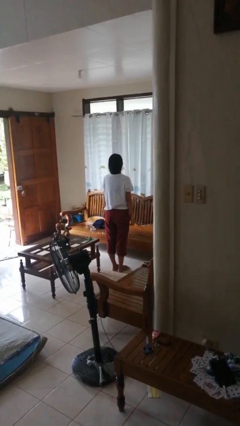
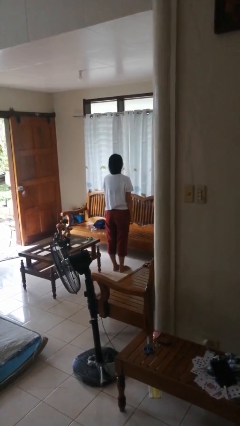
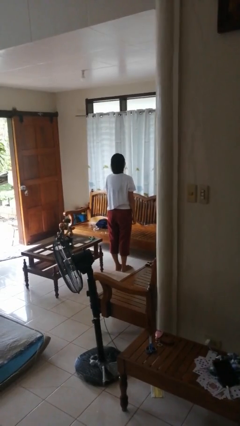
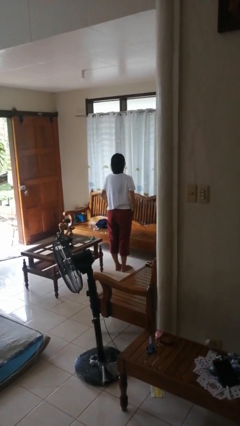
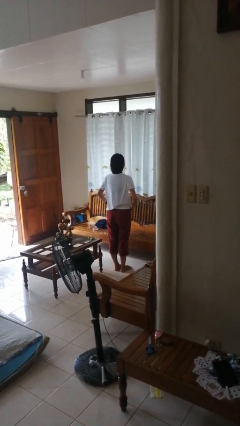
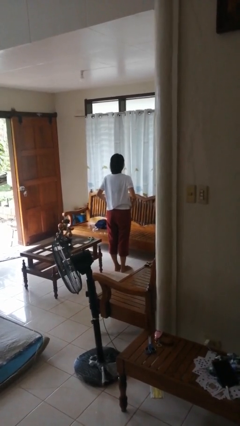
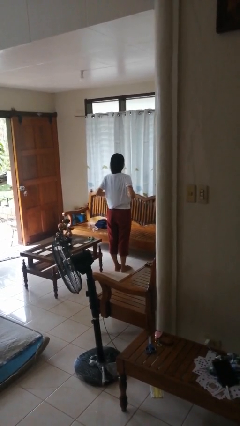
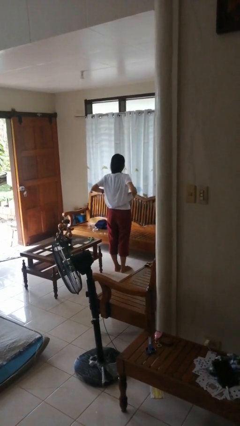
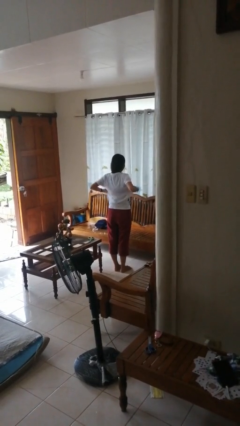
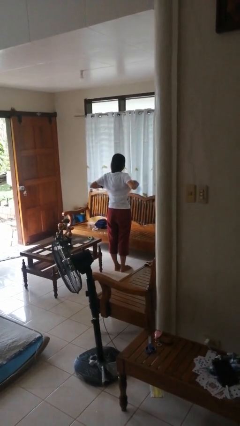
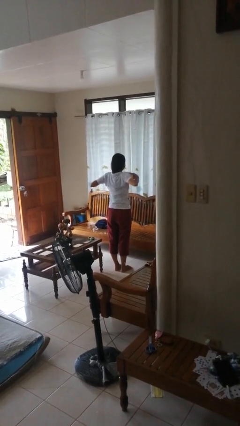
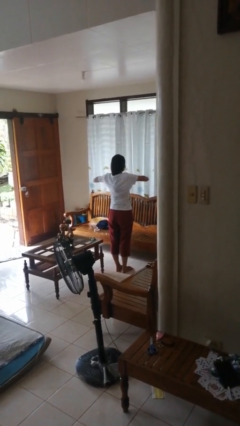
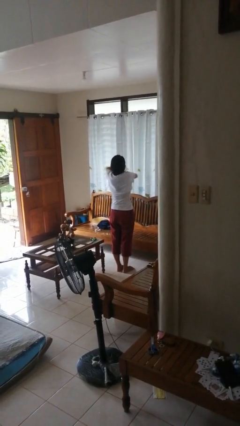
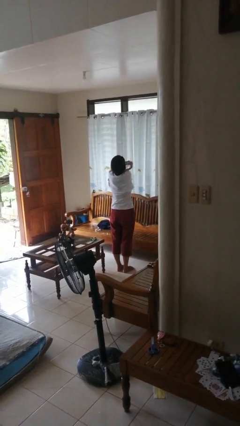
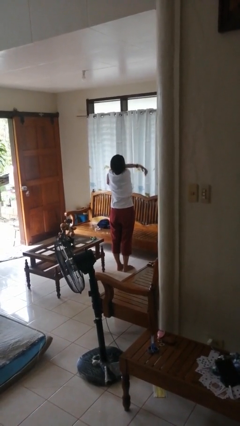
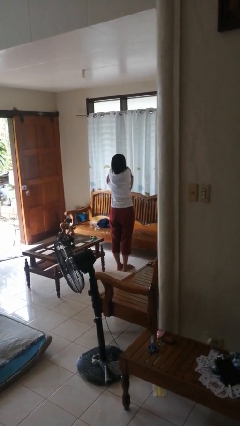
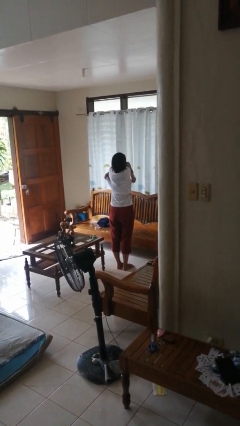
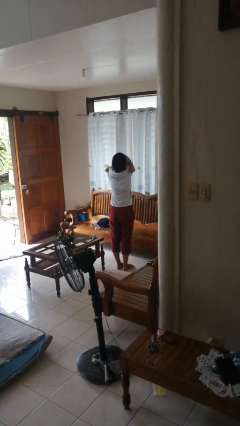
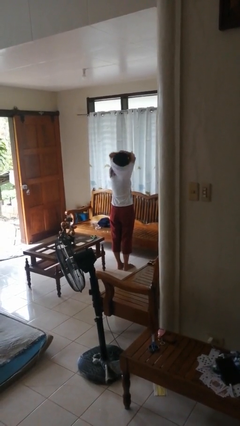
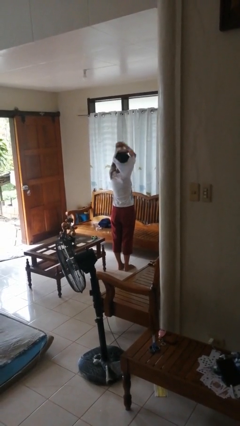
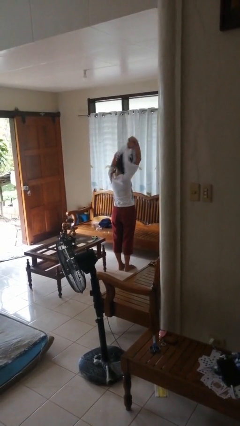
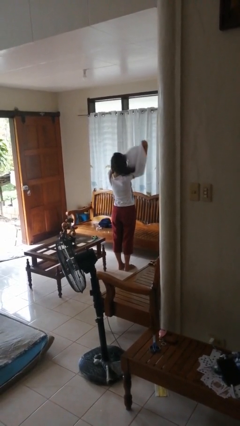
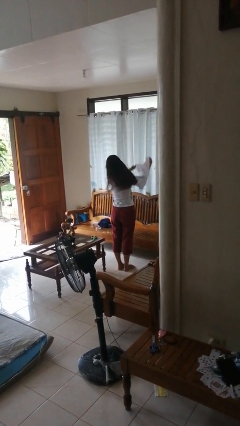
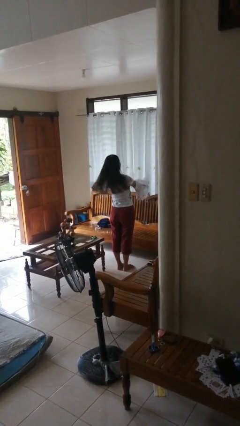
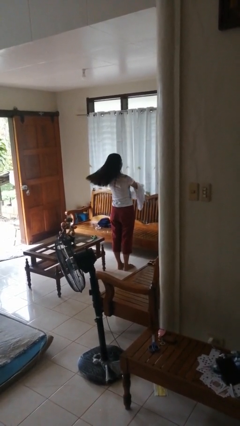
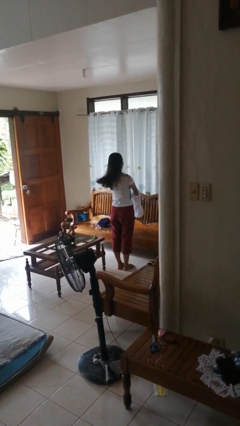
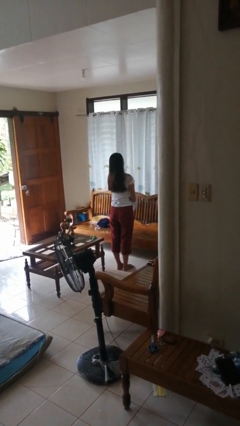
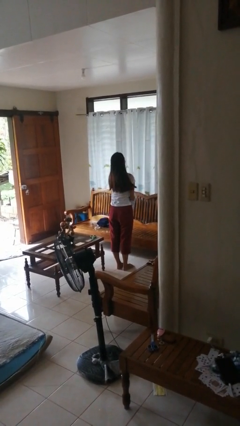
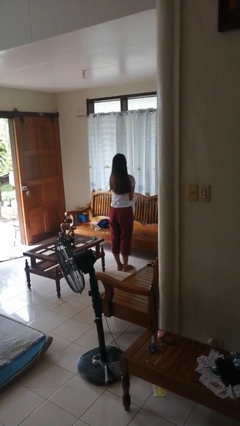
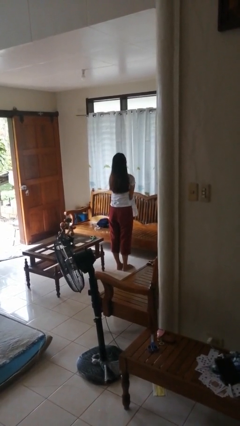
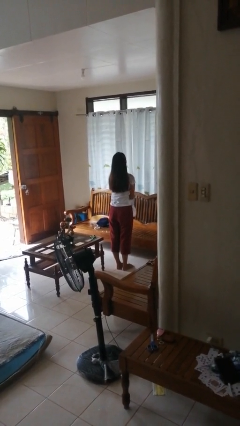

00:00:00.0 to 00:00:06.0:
person takes off shirt

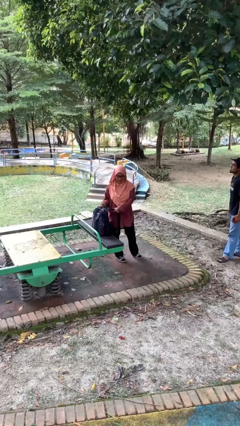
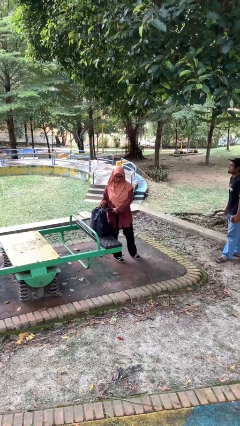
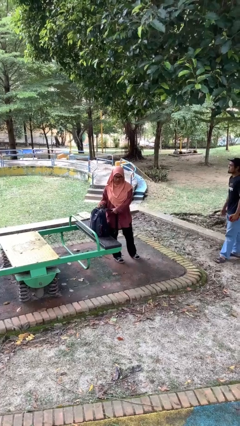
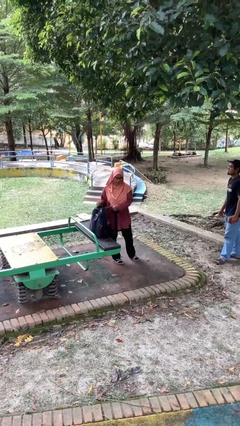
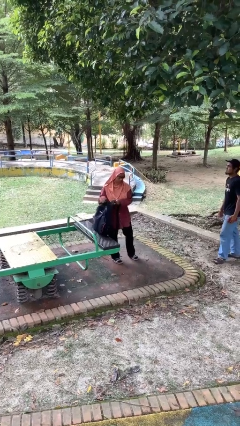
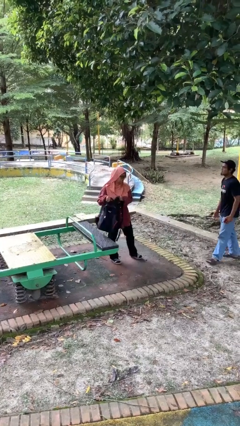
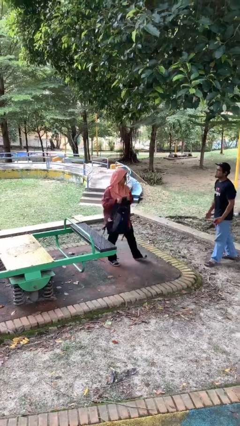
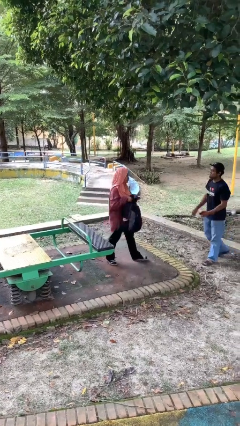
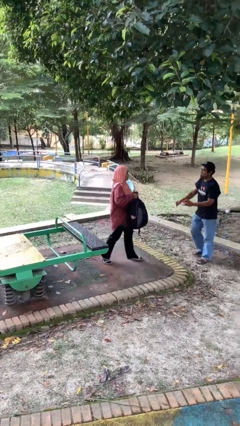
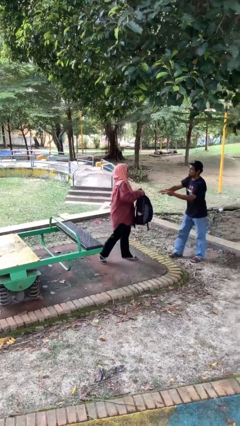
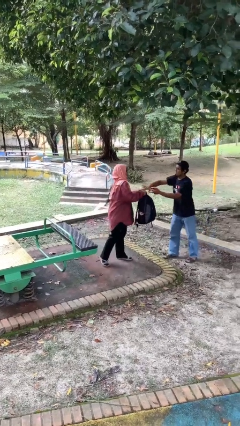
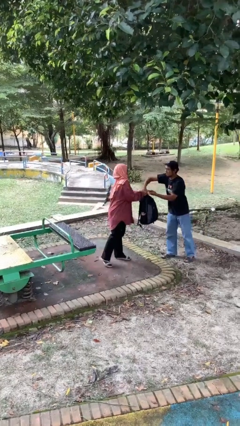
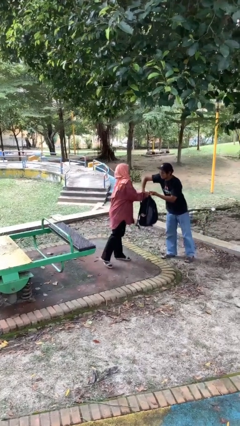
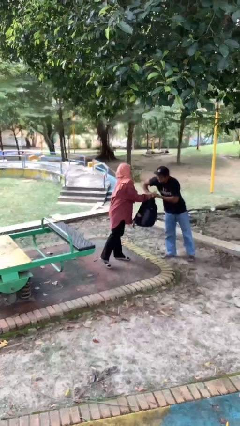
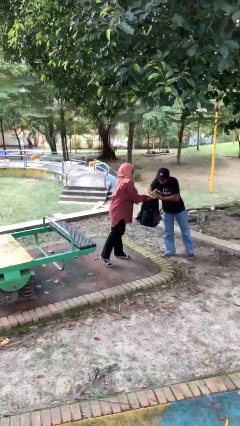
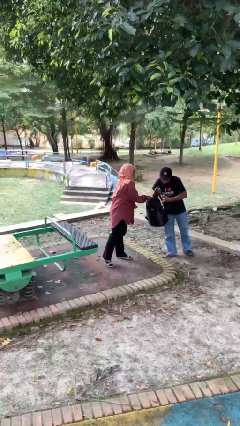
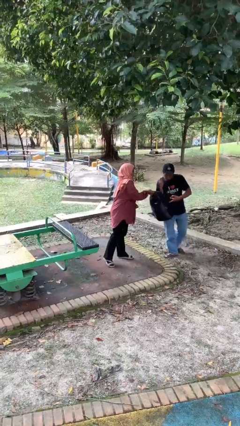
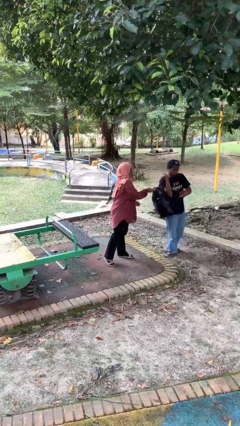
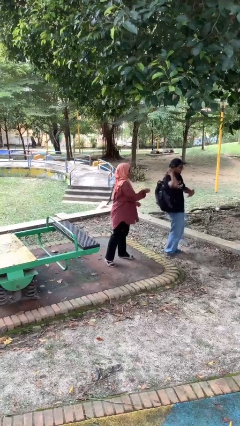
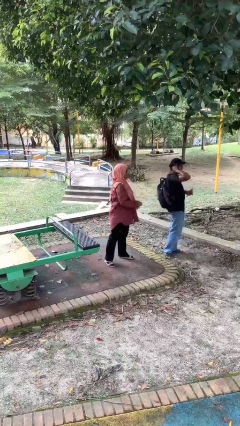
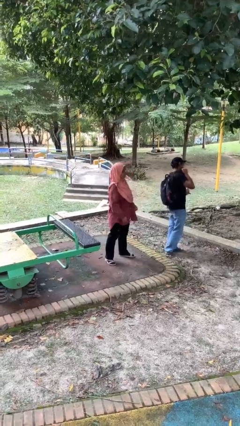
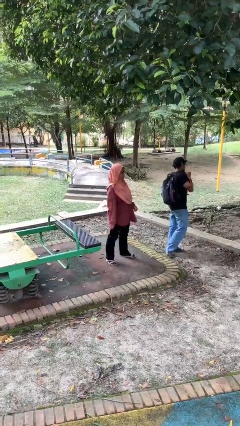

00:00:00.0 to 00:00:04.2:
person transfers object to person

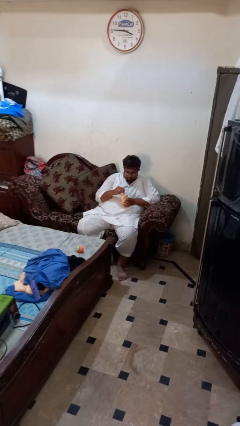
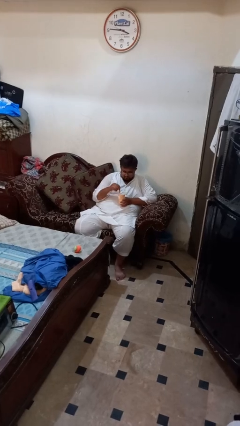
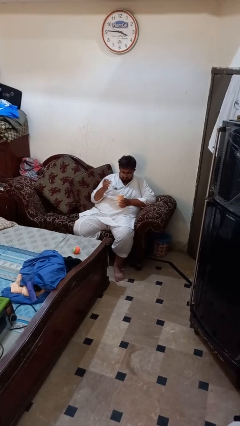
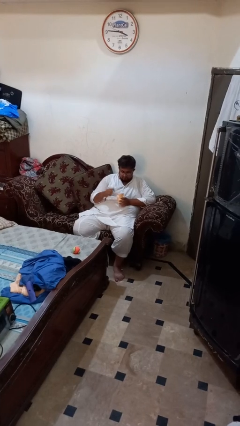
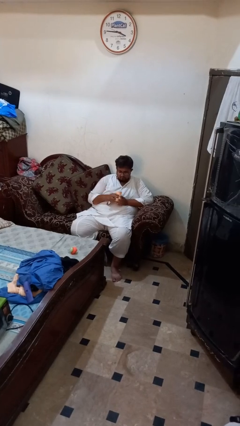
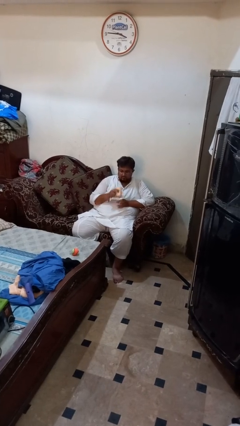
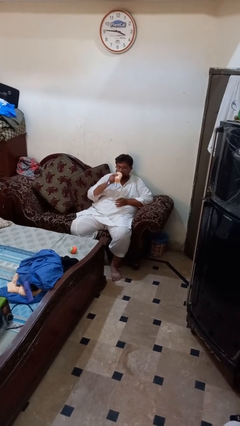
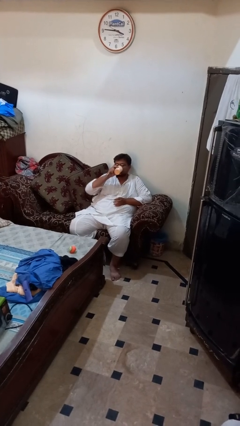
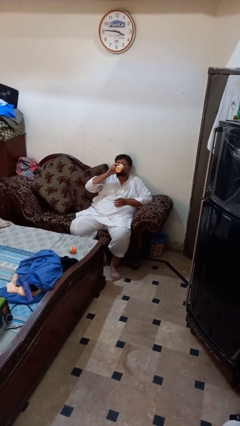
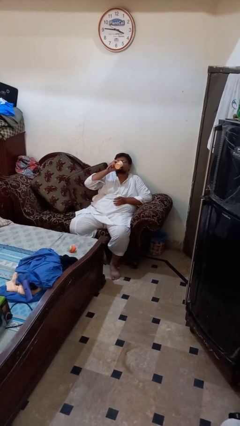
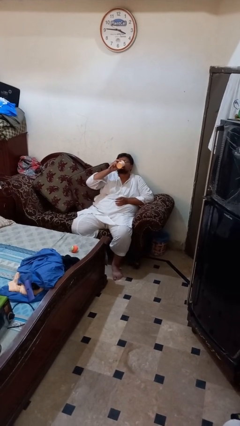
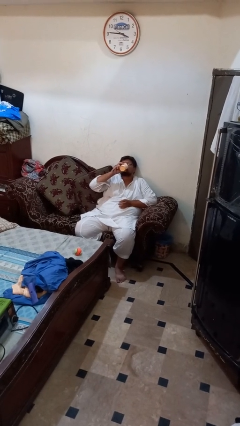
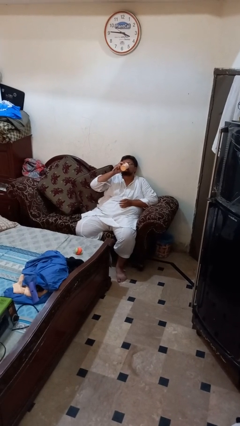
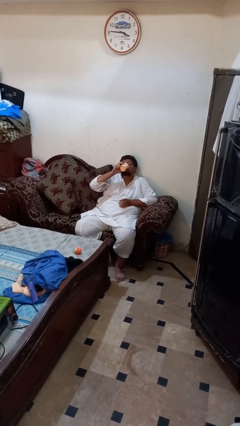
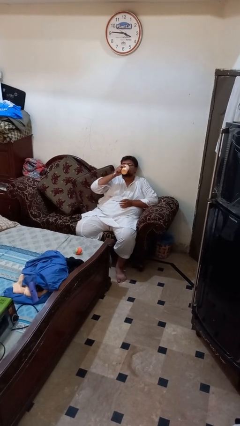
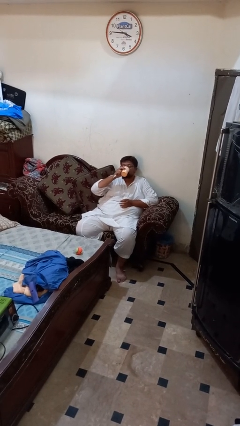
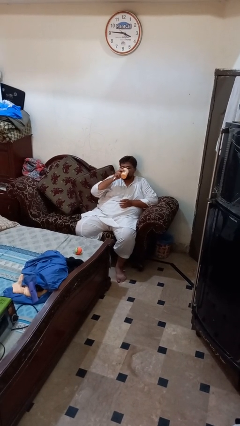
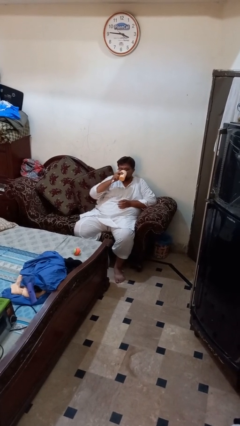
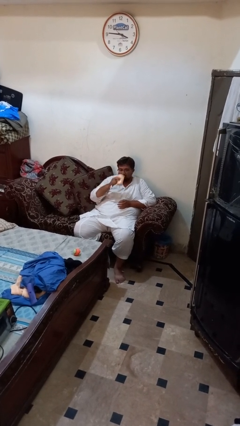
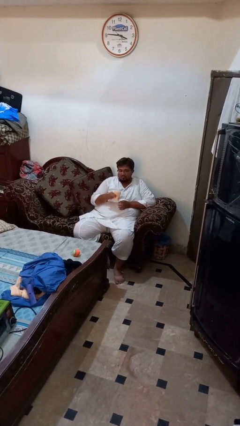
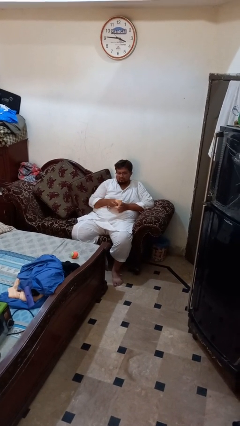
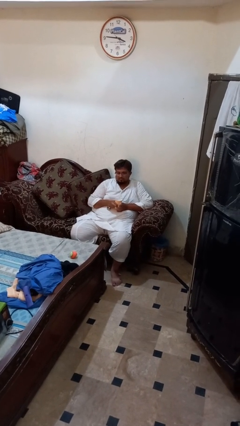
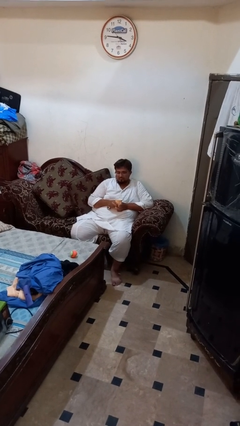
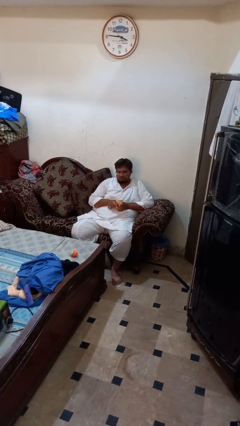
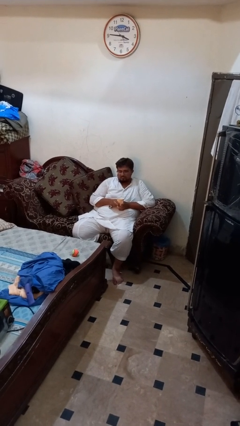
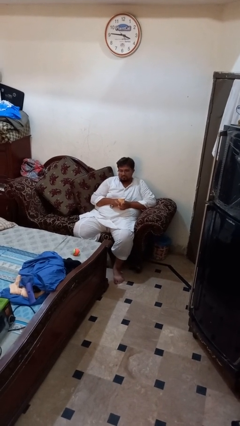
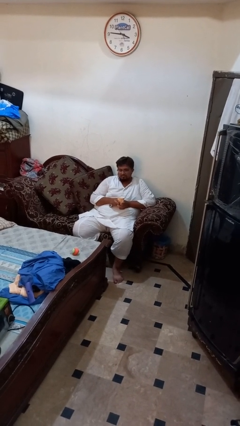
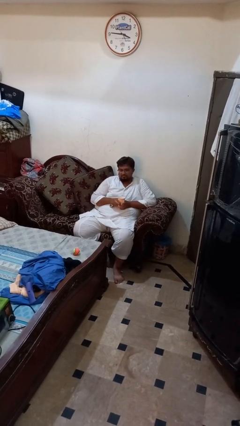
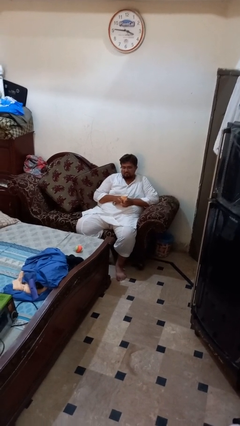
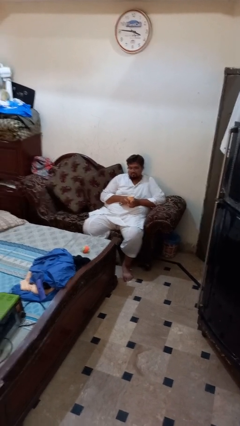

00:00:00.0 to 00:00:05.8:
person drinks from mug

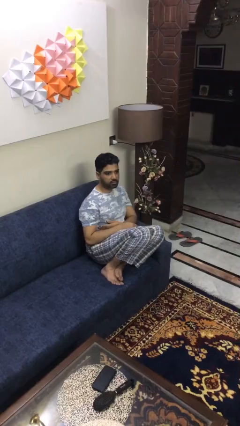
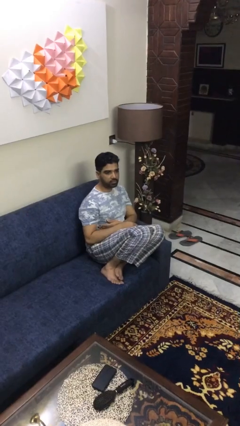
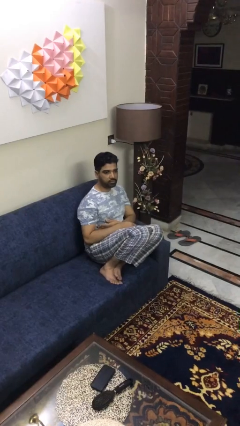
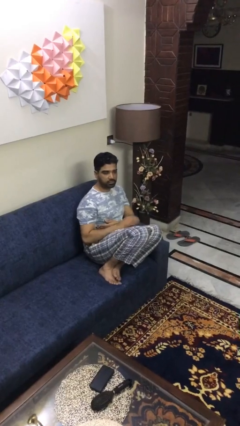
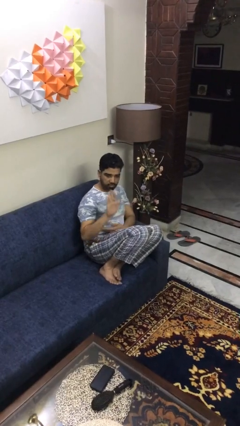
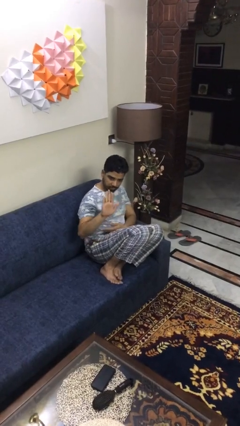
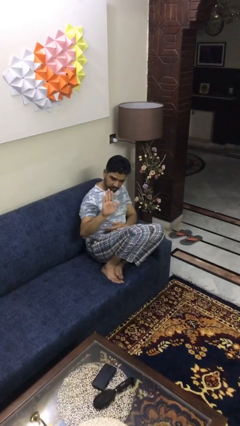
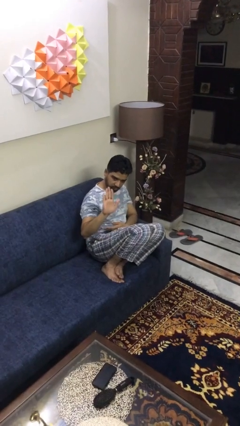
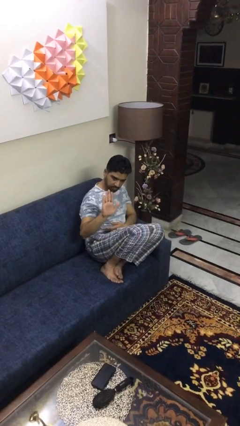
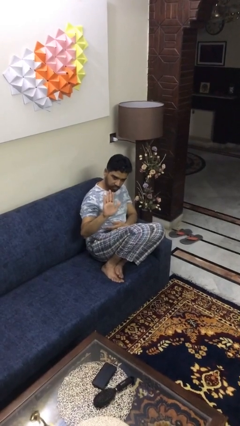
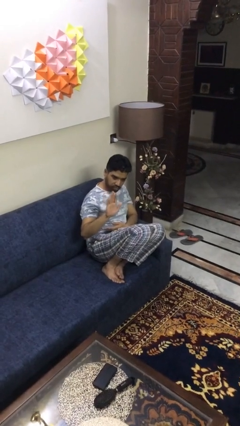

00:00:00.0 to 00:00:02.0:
person gestures stop
